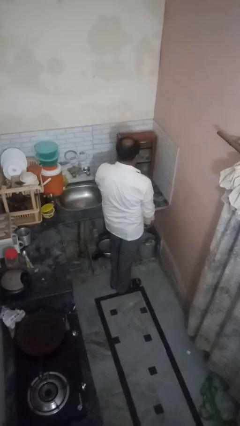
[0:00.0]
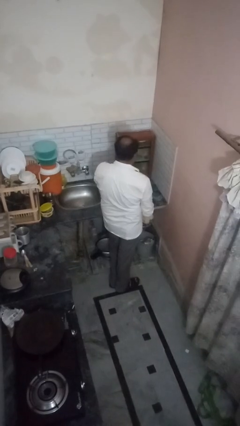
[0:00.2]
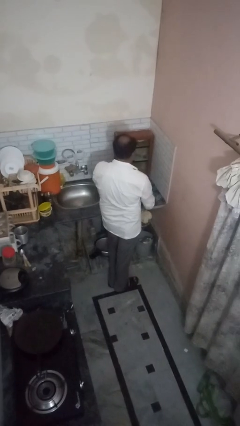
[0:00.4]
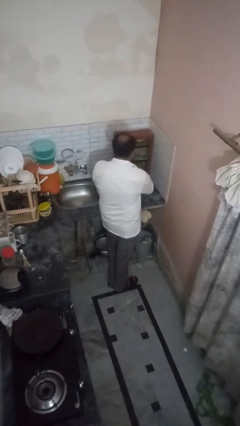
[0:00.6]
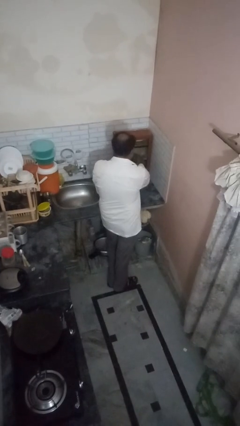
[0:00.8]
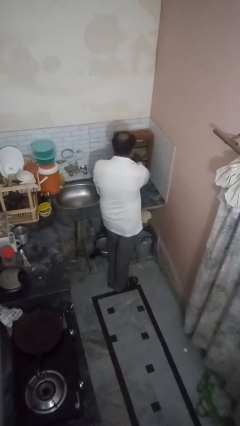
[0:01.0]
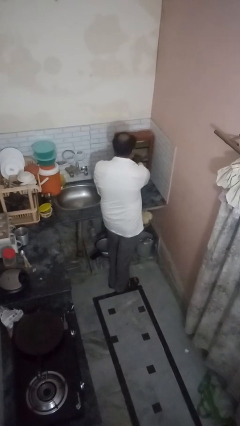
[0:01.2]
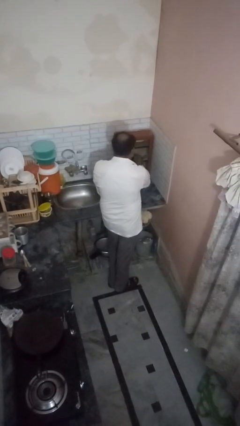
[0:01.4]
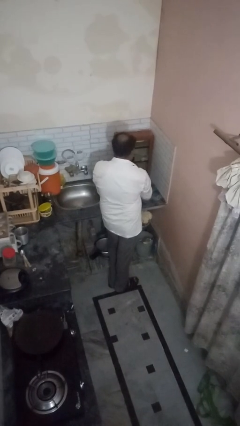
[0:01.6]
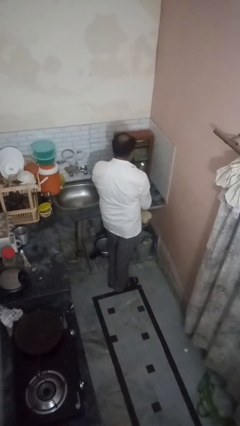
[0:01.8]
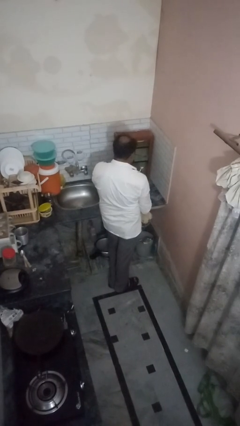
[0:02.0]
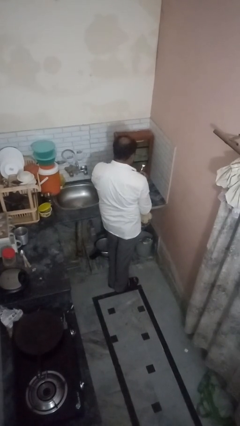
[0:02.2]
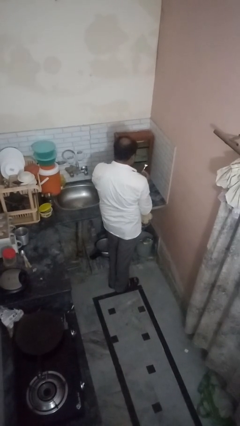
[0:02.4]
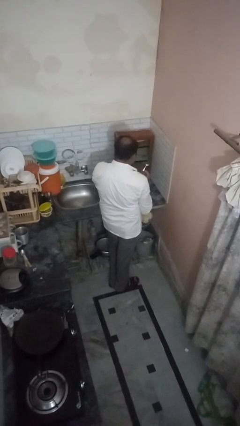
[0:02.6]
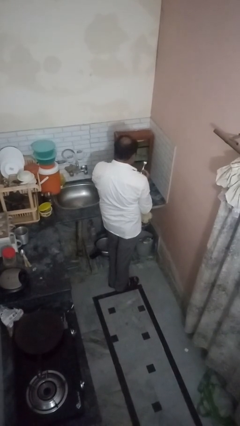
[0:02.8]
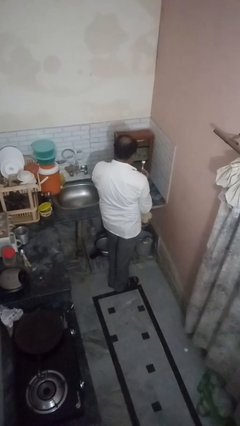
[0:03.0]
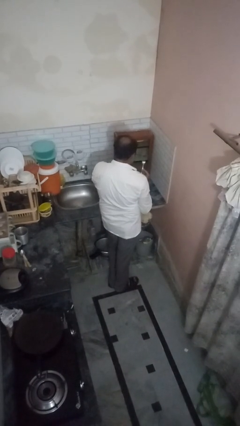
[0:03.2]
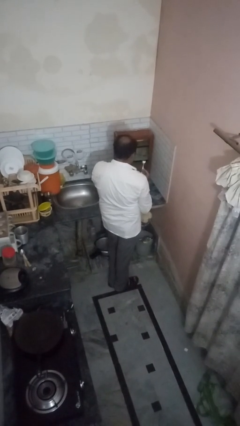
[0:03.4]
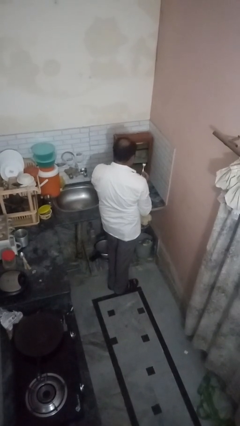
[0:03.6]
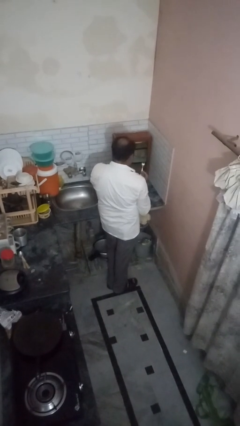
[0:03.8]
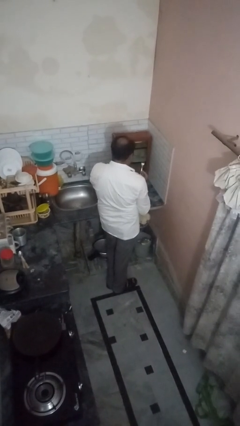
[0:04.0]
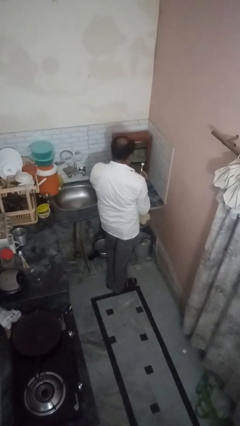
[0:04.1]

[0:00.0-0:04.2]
person takes object from kitchen drawer

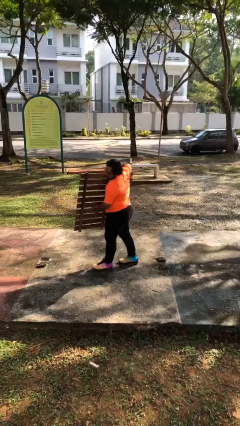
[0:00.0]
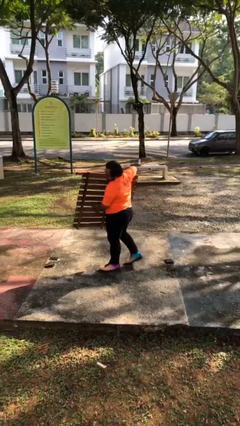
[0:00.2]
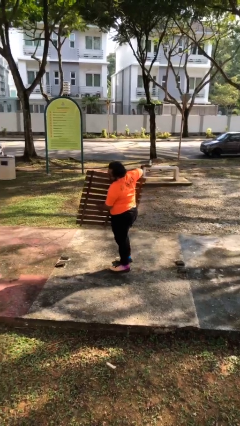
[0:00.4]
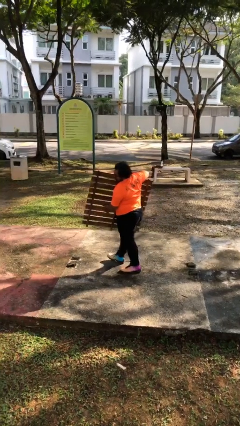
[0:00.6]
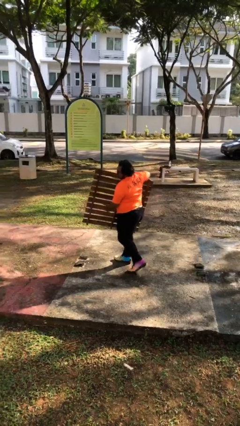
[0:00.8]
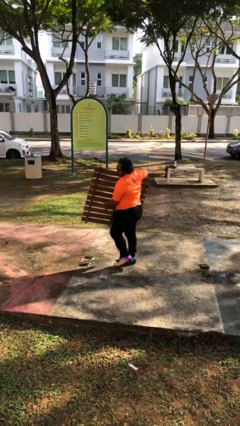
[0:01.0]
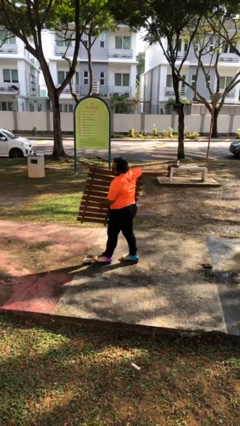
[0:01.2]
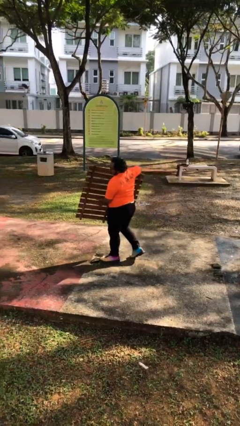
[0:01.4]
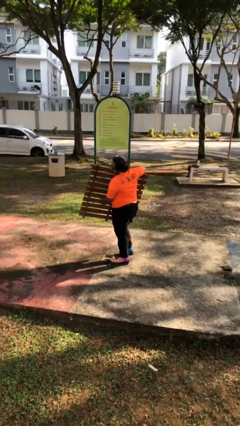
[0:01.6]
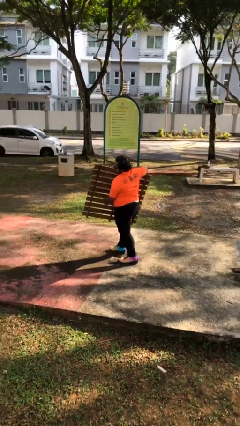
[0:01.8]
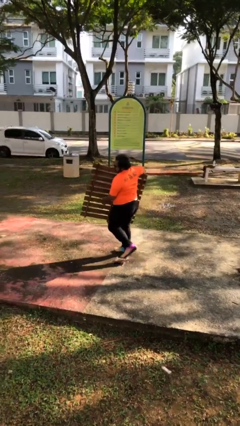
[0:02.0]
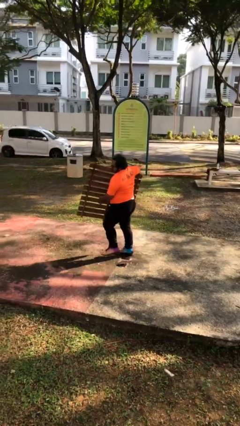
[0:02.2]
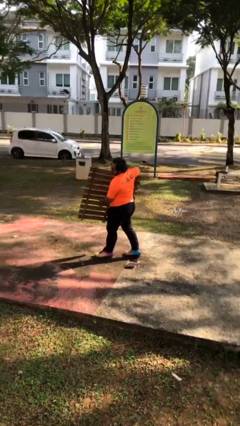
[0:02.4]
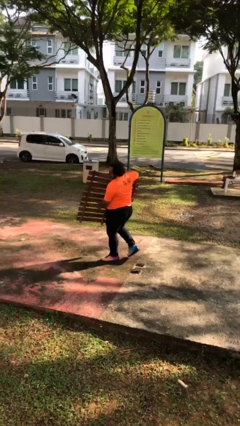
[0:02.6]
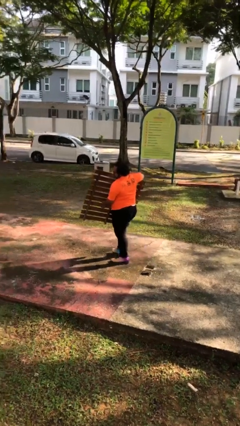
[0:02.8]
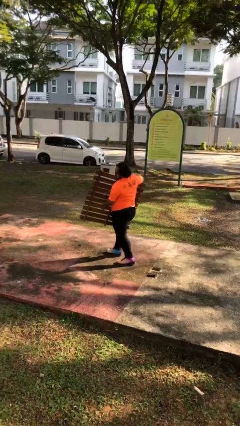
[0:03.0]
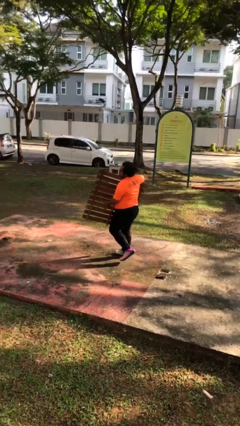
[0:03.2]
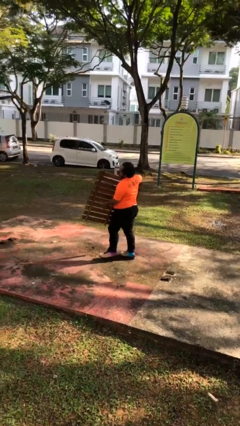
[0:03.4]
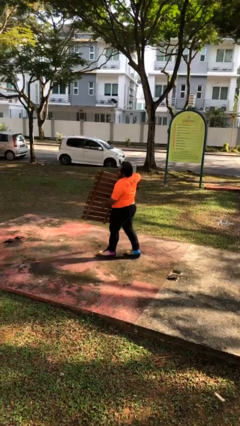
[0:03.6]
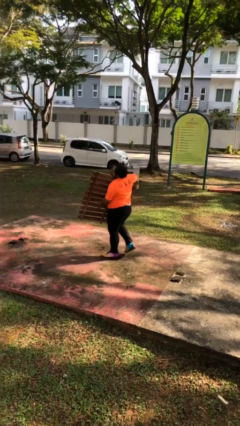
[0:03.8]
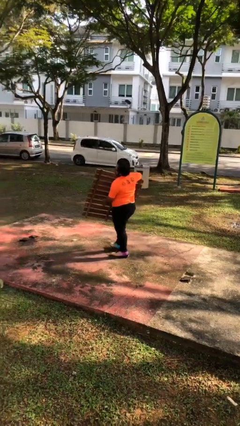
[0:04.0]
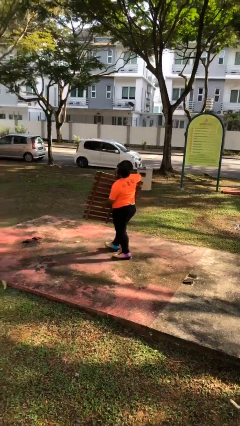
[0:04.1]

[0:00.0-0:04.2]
person carries heavy object

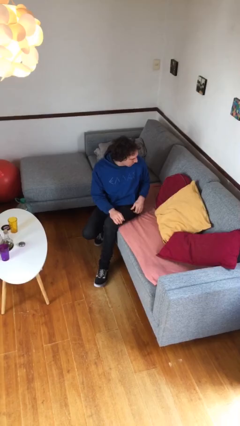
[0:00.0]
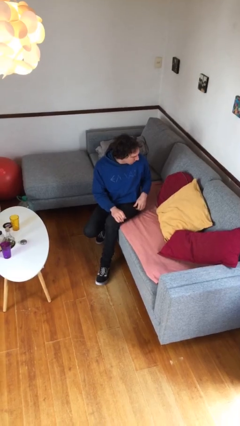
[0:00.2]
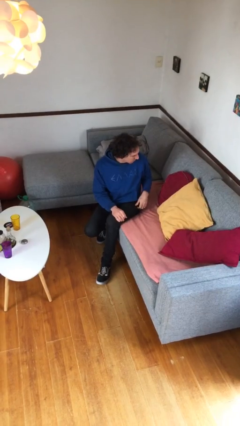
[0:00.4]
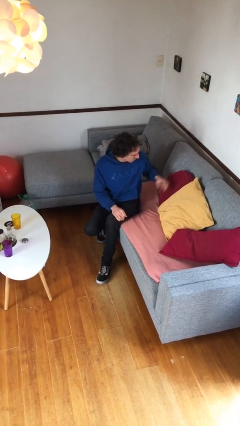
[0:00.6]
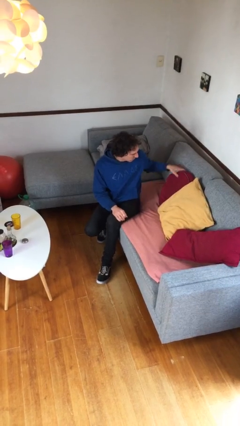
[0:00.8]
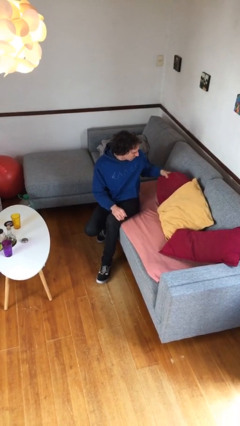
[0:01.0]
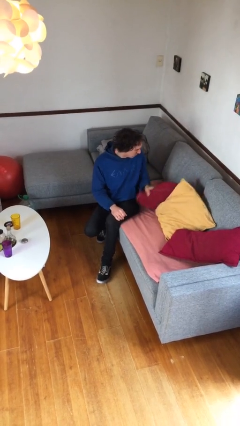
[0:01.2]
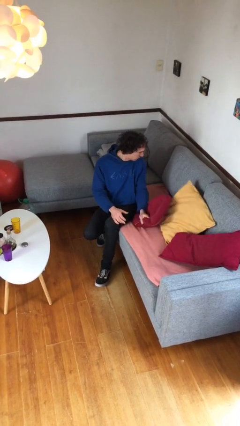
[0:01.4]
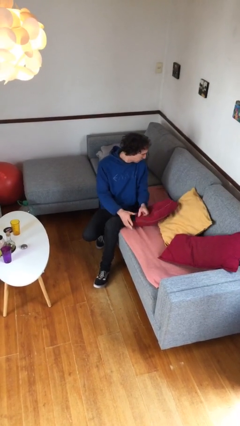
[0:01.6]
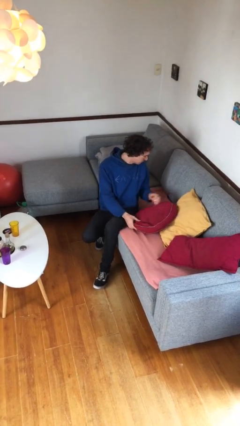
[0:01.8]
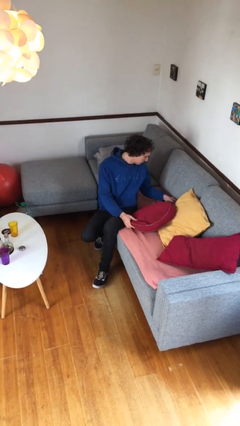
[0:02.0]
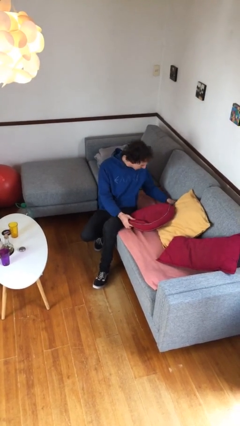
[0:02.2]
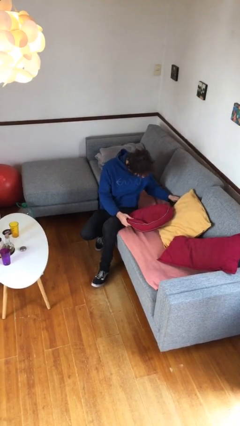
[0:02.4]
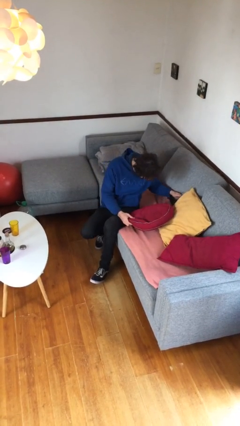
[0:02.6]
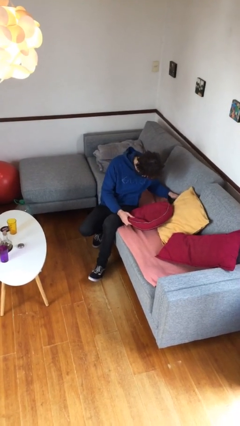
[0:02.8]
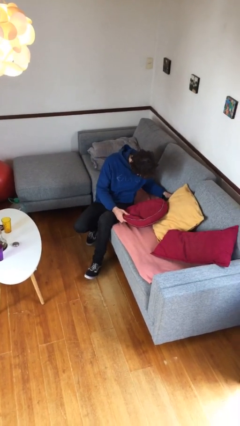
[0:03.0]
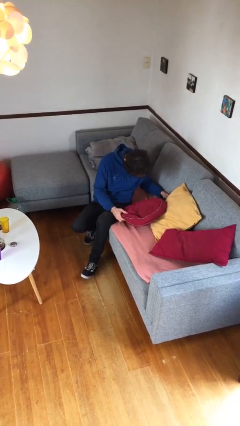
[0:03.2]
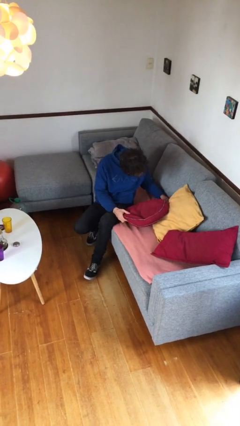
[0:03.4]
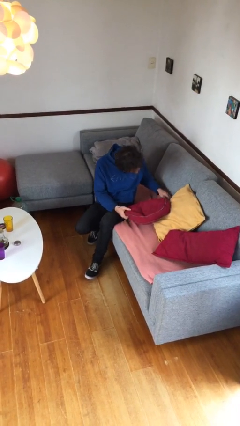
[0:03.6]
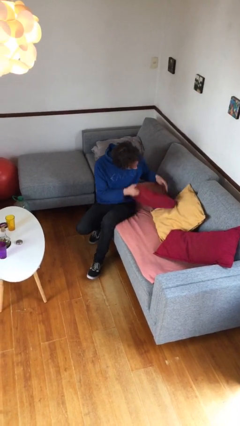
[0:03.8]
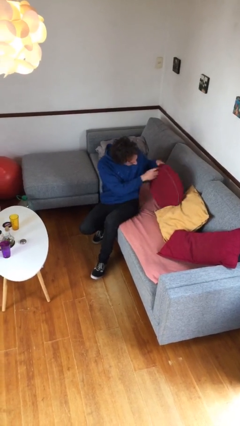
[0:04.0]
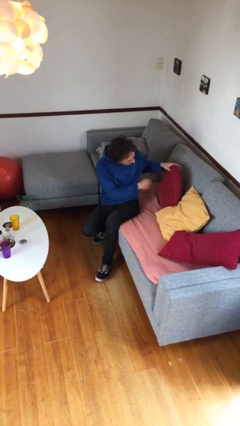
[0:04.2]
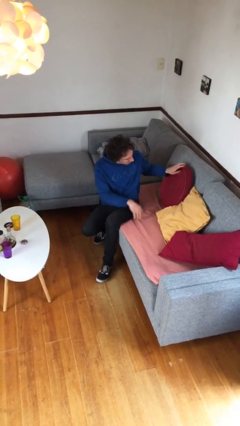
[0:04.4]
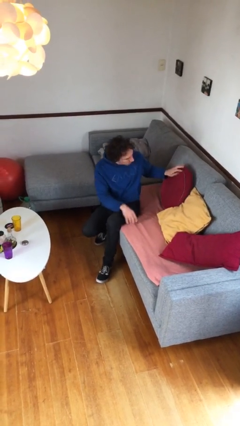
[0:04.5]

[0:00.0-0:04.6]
person searches in couch

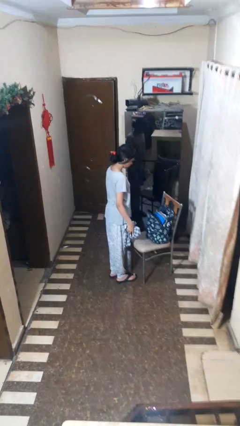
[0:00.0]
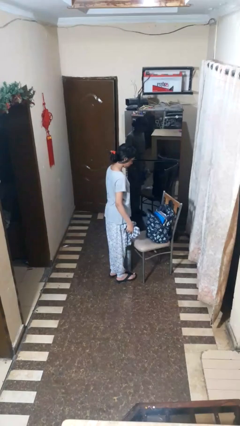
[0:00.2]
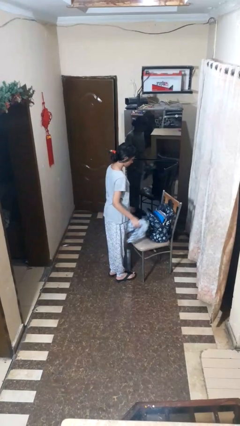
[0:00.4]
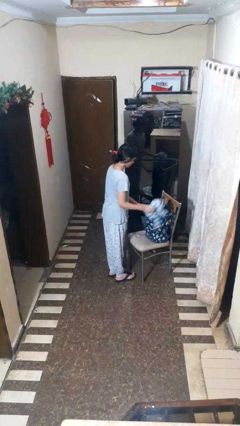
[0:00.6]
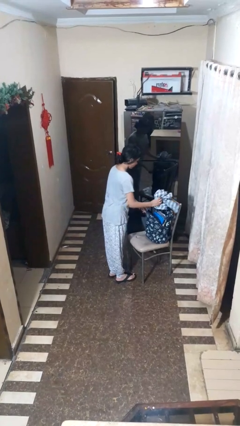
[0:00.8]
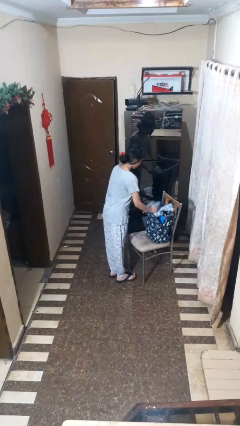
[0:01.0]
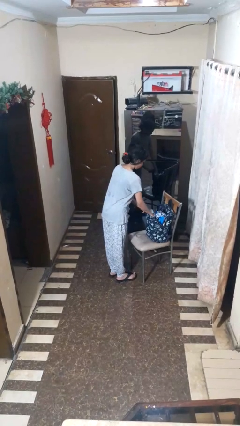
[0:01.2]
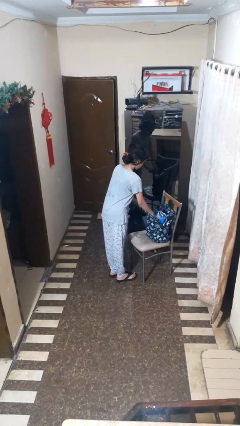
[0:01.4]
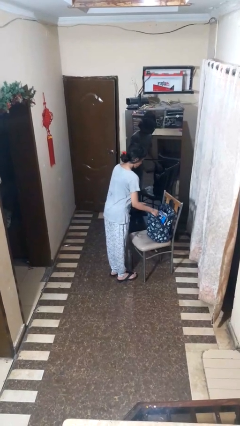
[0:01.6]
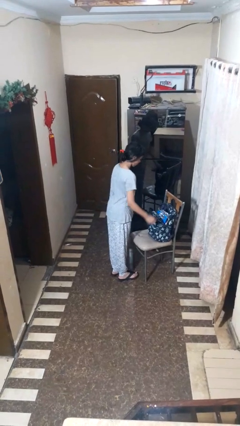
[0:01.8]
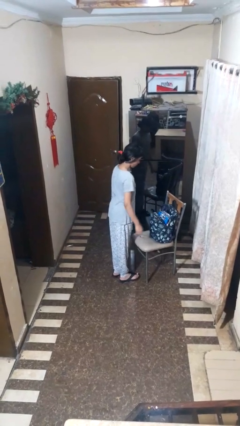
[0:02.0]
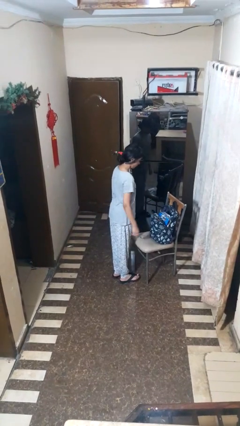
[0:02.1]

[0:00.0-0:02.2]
person puts object into bag

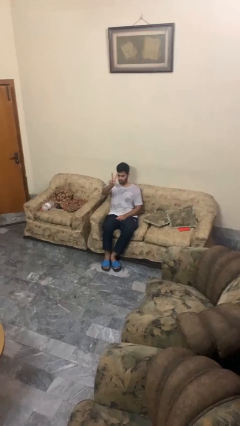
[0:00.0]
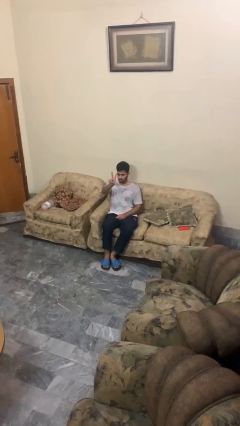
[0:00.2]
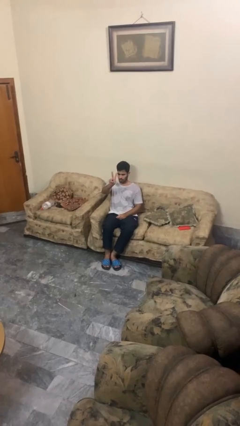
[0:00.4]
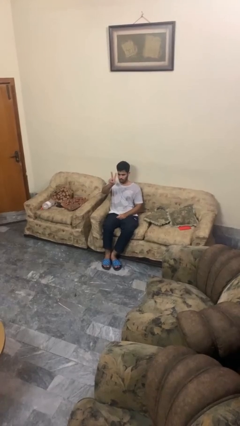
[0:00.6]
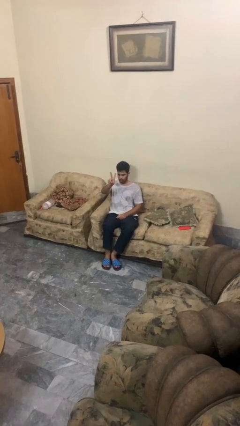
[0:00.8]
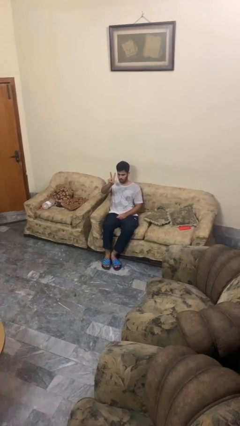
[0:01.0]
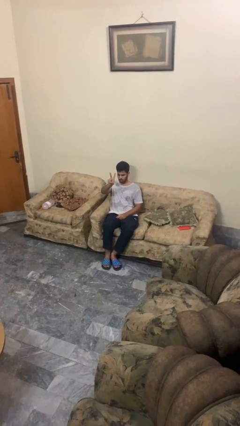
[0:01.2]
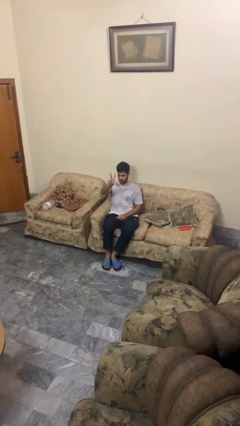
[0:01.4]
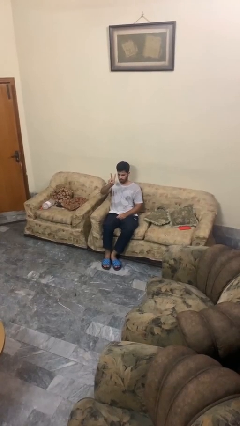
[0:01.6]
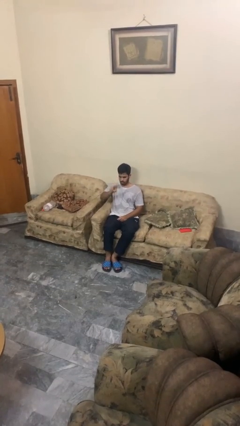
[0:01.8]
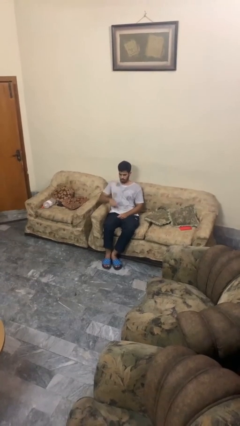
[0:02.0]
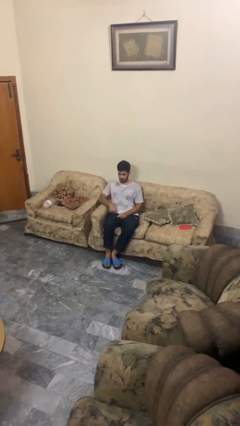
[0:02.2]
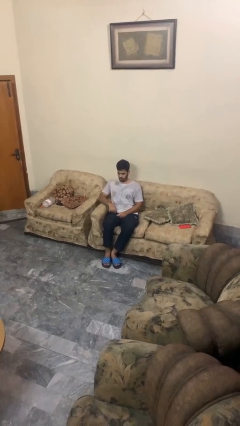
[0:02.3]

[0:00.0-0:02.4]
person gestures peace
